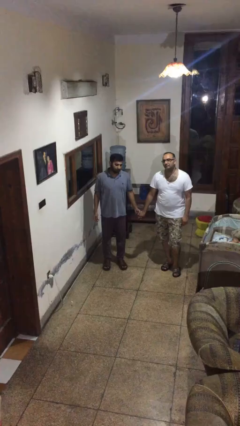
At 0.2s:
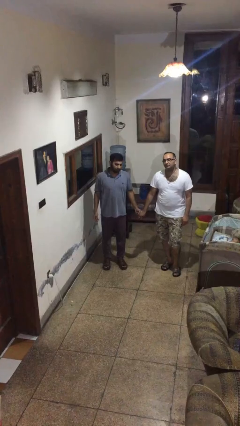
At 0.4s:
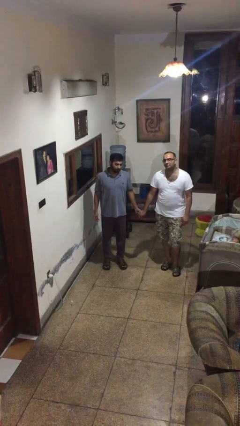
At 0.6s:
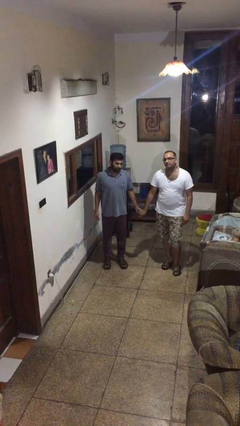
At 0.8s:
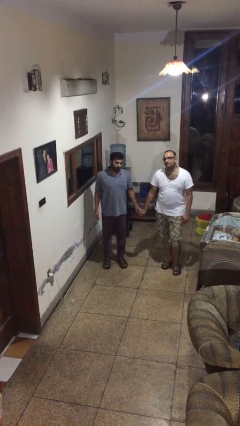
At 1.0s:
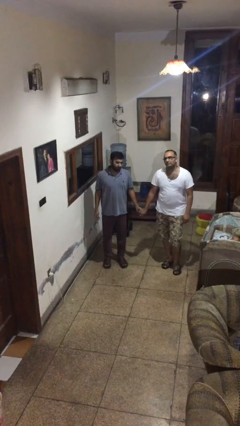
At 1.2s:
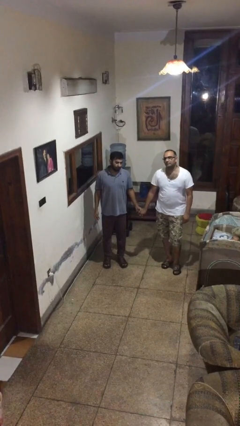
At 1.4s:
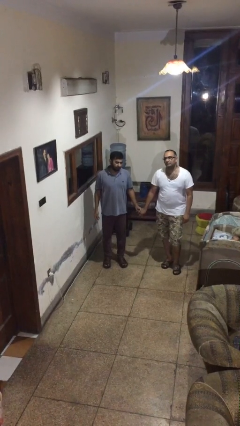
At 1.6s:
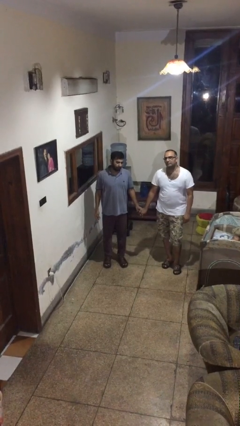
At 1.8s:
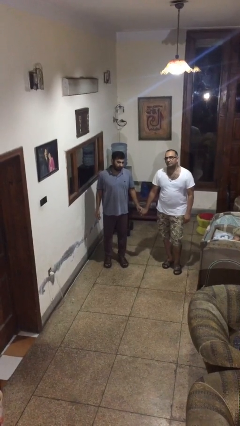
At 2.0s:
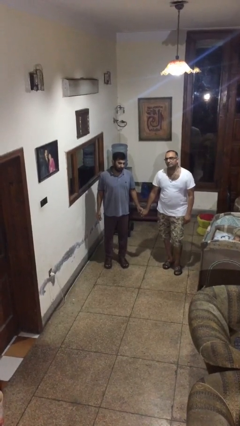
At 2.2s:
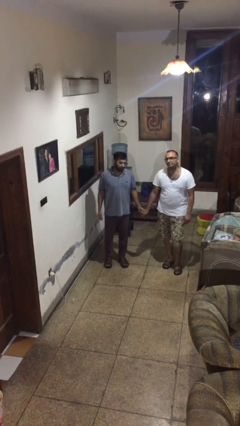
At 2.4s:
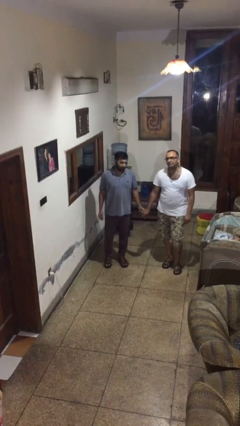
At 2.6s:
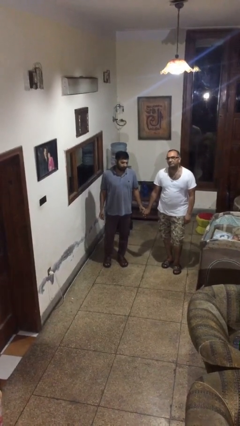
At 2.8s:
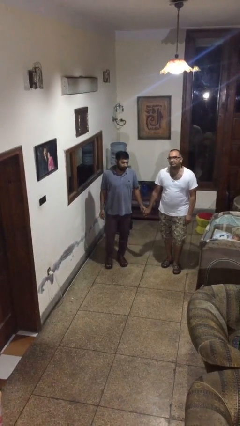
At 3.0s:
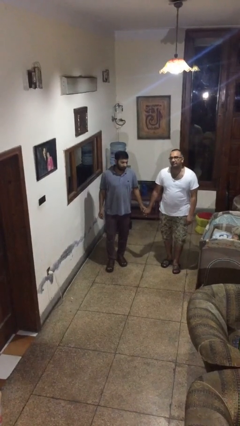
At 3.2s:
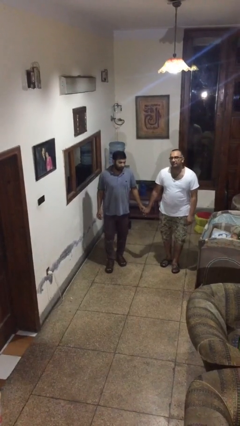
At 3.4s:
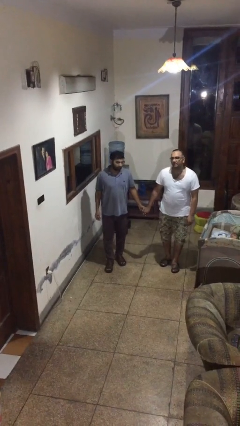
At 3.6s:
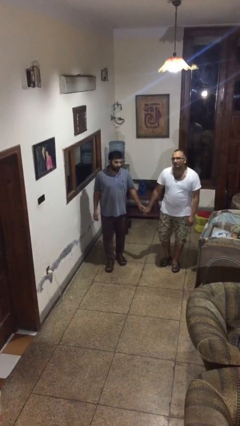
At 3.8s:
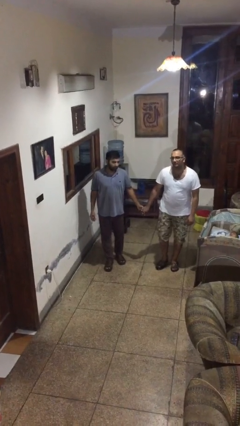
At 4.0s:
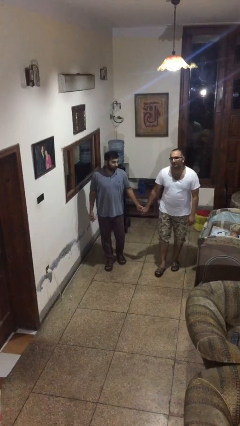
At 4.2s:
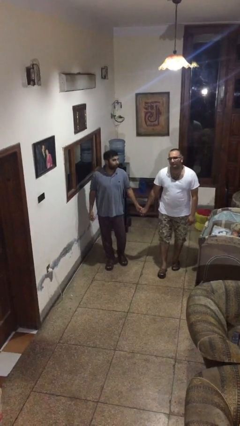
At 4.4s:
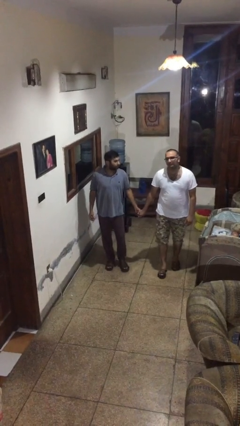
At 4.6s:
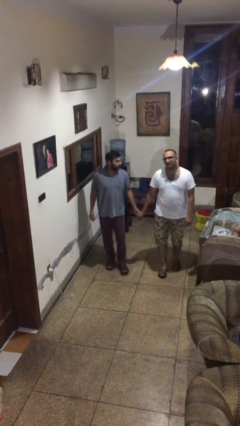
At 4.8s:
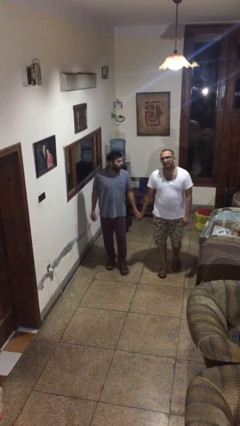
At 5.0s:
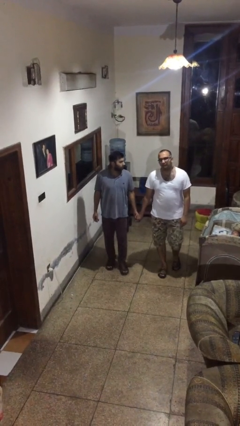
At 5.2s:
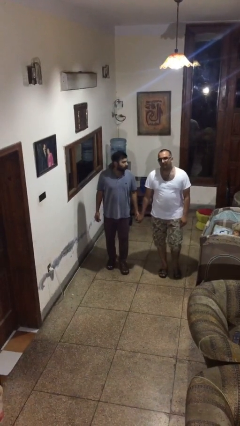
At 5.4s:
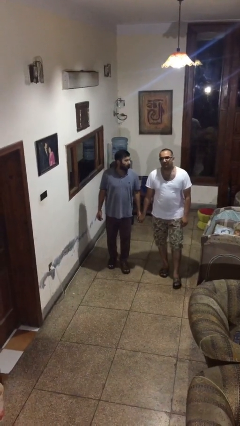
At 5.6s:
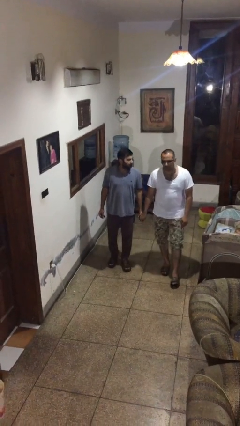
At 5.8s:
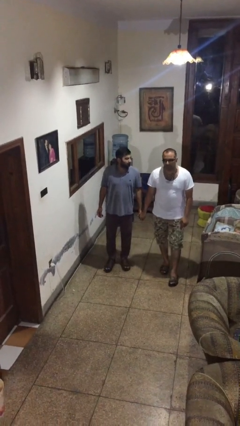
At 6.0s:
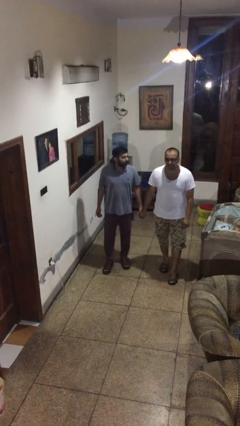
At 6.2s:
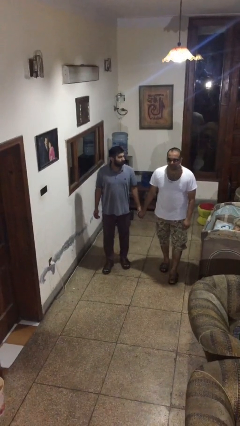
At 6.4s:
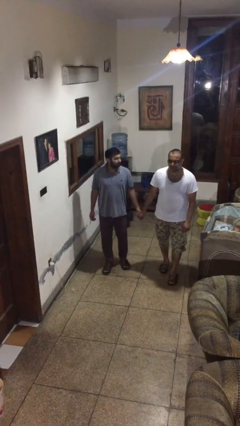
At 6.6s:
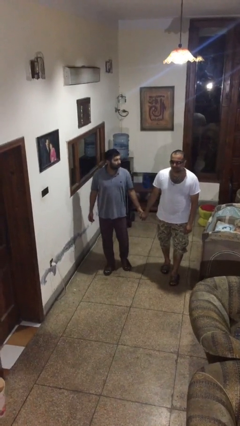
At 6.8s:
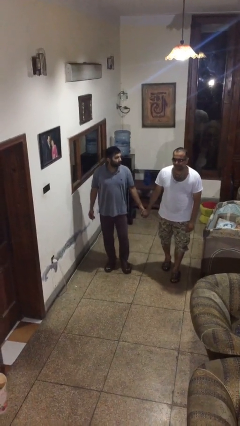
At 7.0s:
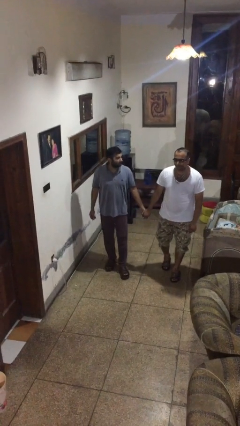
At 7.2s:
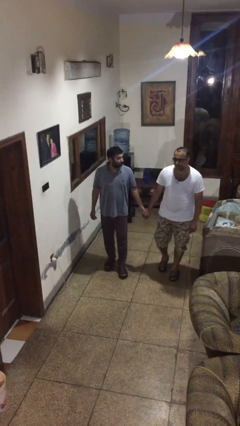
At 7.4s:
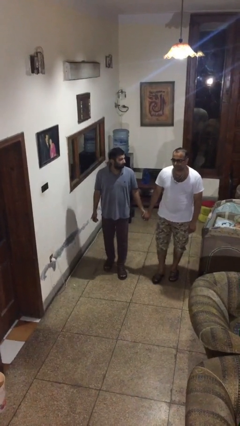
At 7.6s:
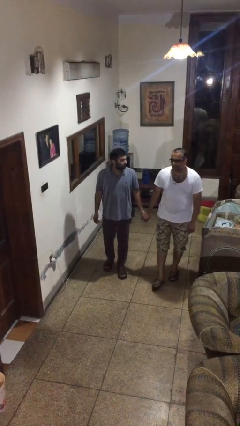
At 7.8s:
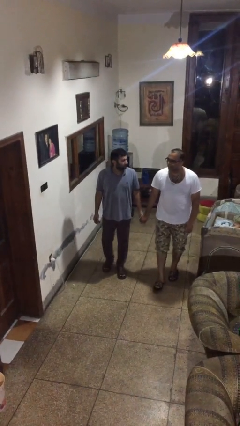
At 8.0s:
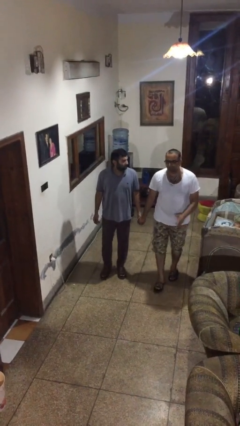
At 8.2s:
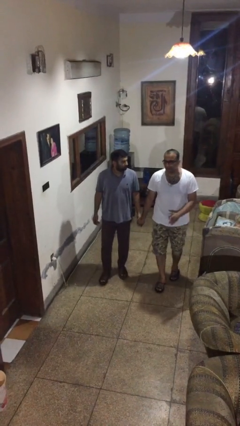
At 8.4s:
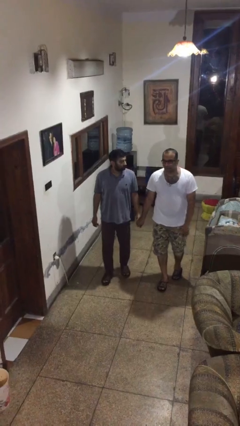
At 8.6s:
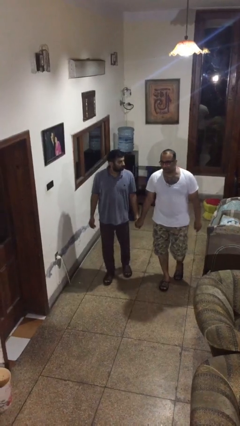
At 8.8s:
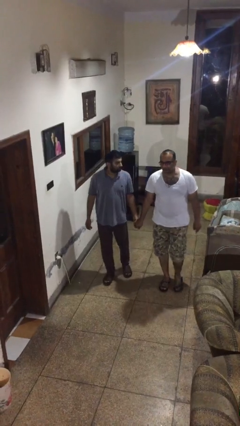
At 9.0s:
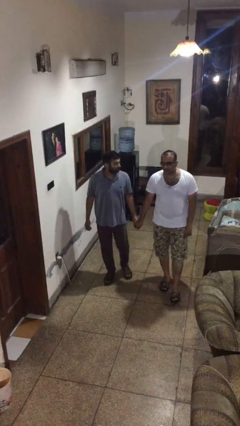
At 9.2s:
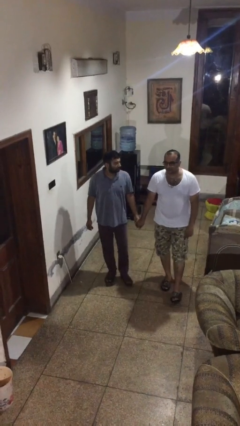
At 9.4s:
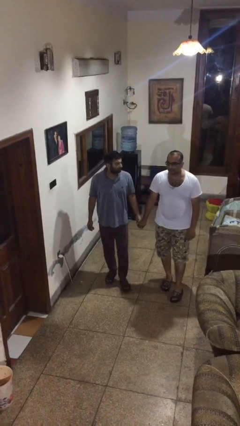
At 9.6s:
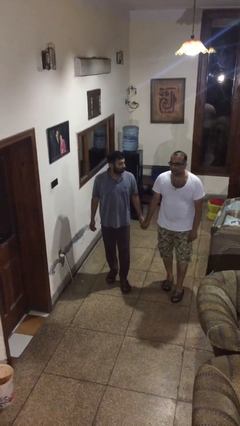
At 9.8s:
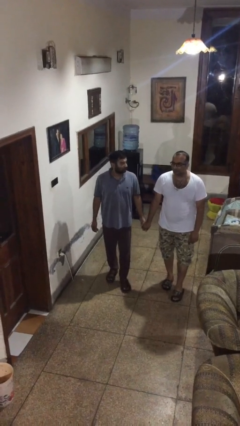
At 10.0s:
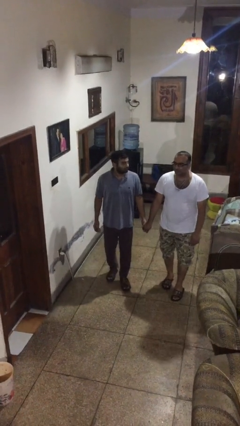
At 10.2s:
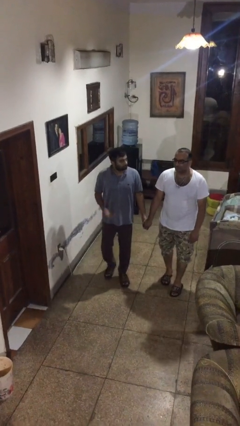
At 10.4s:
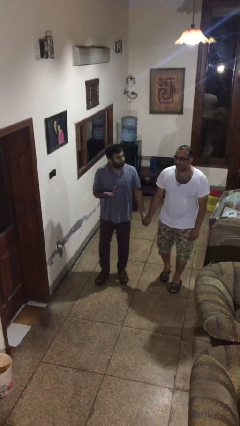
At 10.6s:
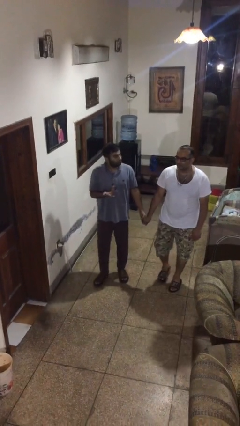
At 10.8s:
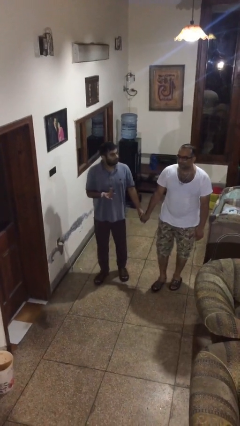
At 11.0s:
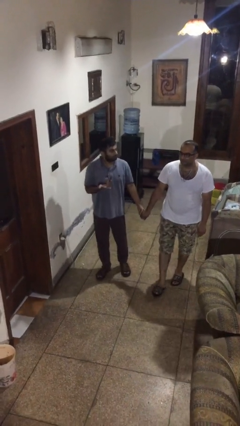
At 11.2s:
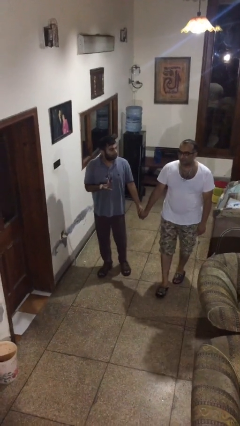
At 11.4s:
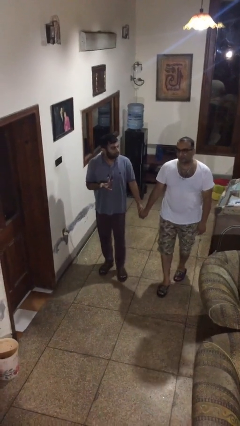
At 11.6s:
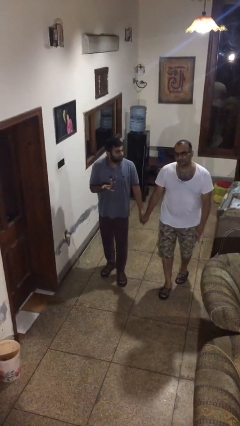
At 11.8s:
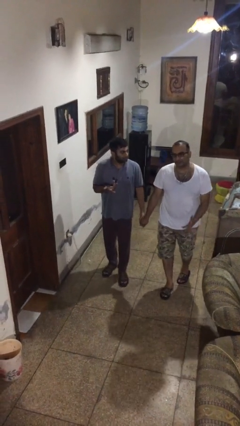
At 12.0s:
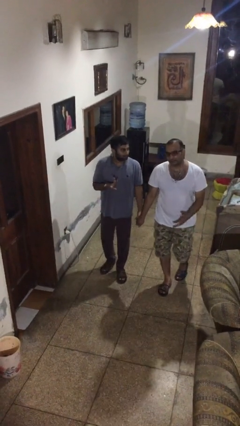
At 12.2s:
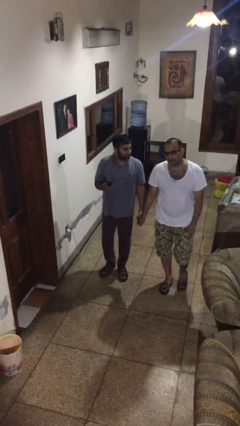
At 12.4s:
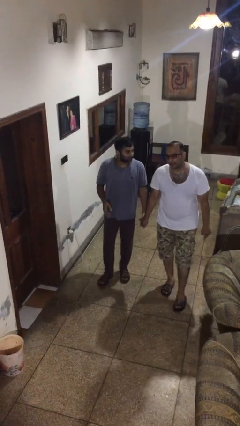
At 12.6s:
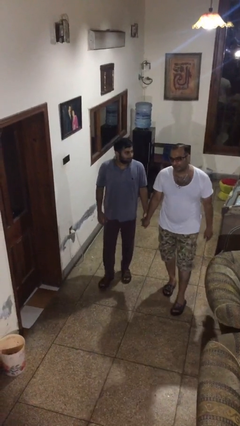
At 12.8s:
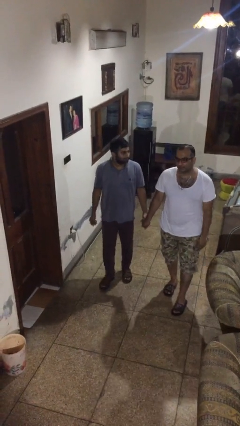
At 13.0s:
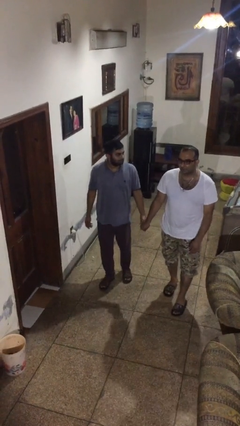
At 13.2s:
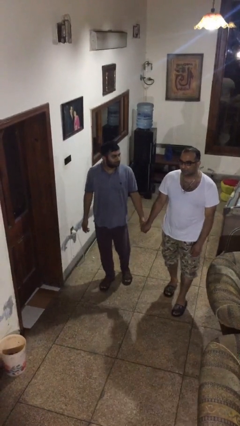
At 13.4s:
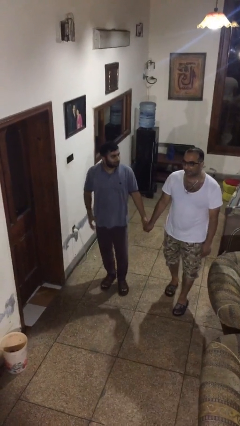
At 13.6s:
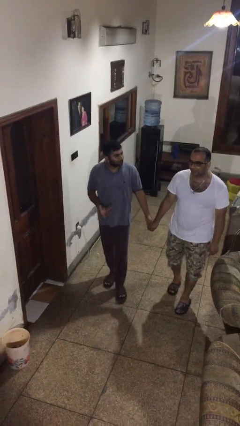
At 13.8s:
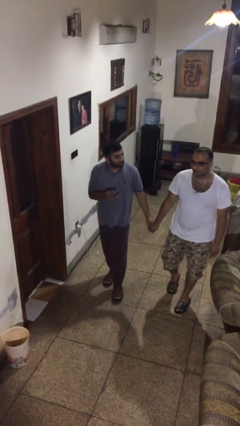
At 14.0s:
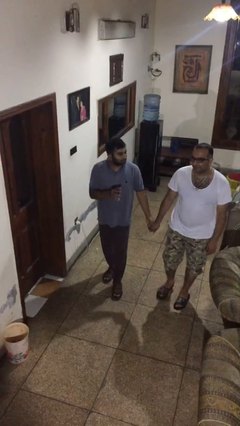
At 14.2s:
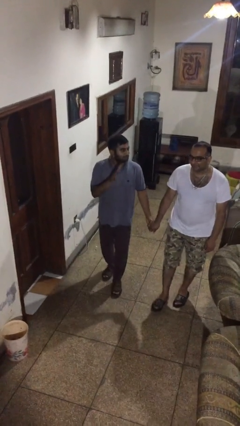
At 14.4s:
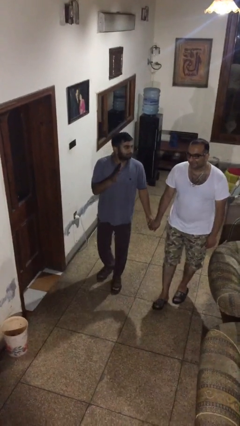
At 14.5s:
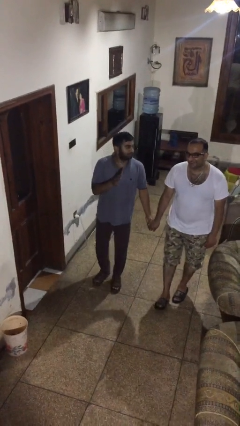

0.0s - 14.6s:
person holds hand

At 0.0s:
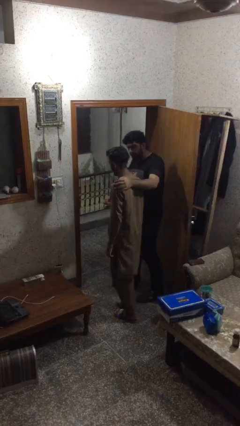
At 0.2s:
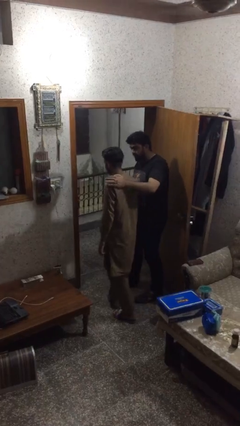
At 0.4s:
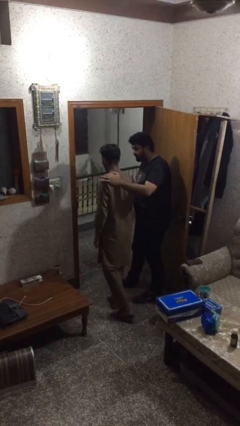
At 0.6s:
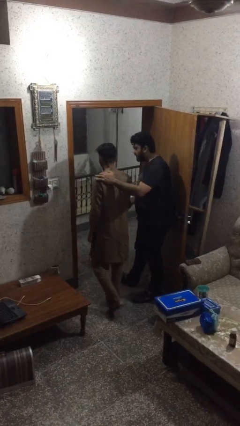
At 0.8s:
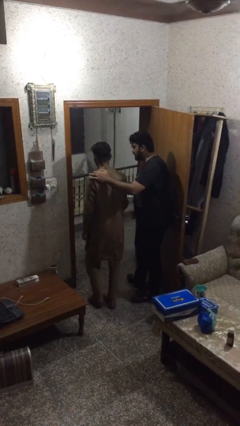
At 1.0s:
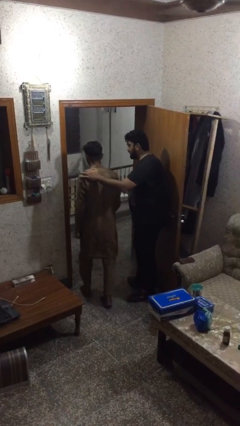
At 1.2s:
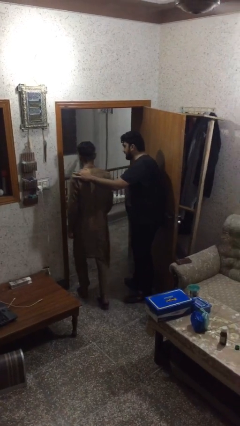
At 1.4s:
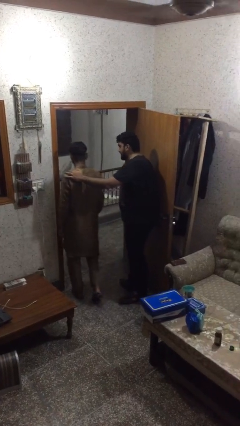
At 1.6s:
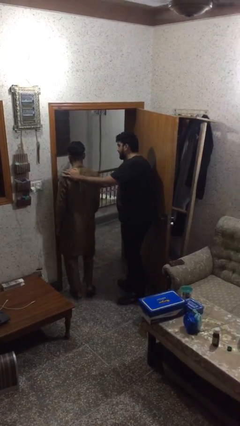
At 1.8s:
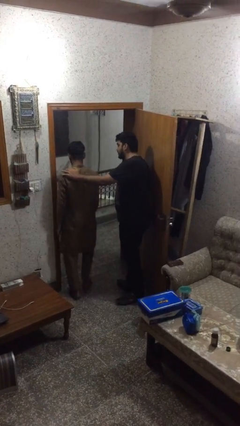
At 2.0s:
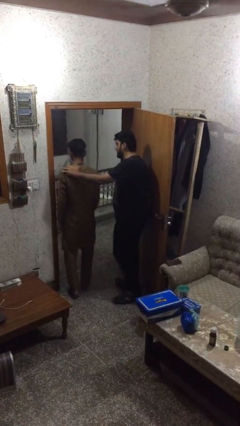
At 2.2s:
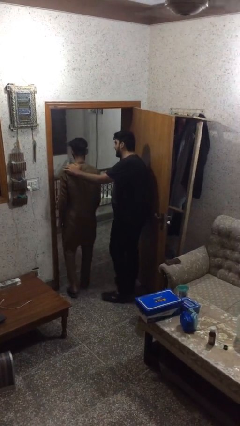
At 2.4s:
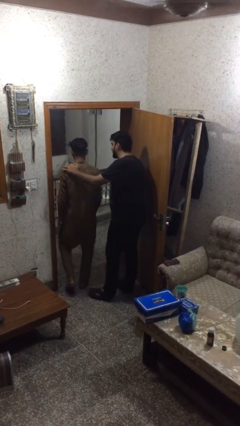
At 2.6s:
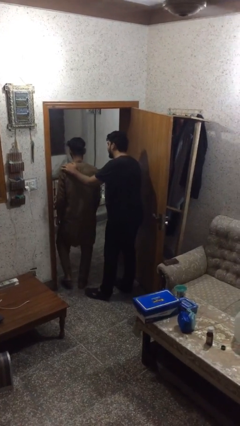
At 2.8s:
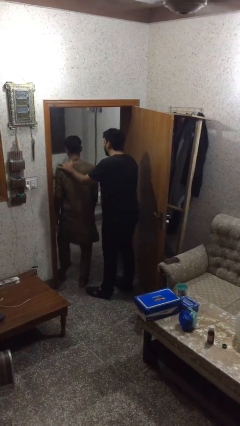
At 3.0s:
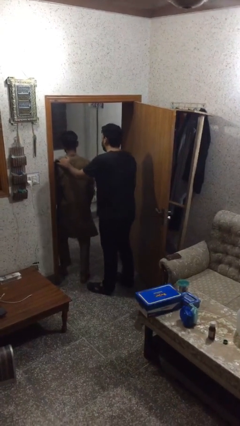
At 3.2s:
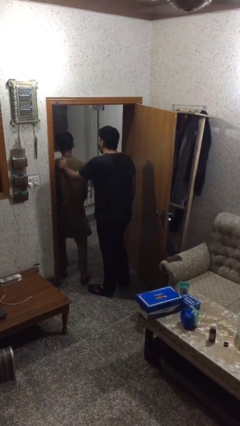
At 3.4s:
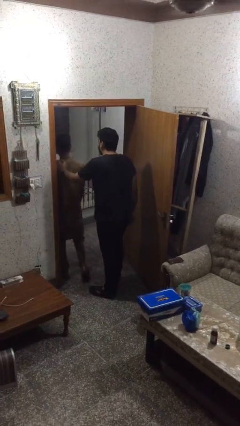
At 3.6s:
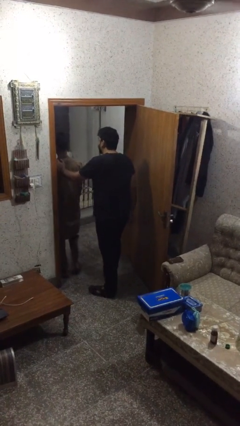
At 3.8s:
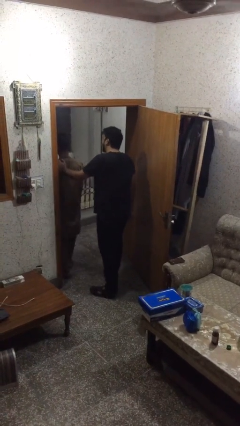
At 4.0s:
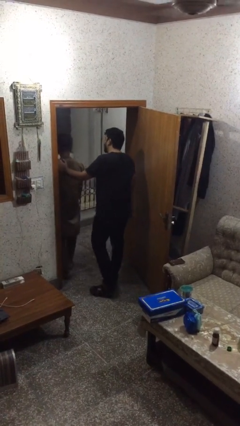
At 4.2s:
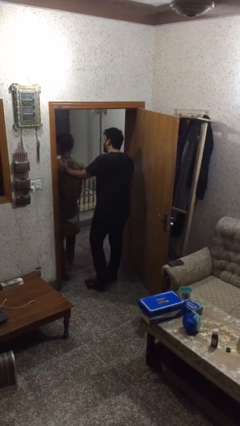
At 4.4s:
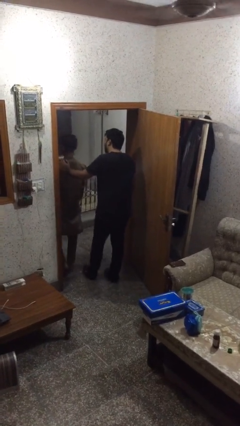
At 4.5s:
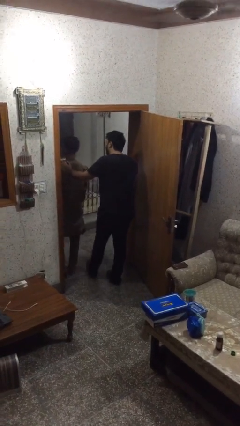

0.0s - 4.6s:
person talks to person
